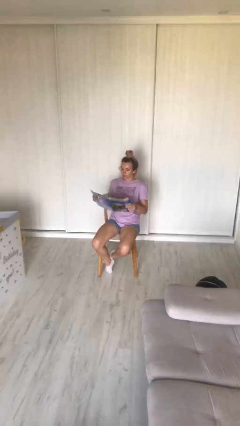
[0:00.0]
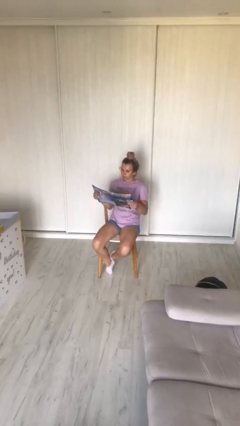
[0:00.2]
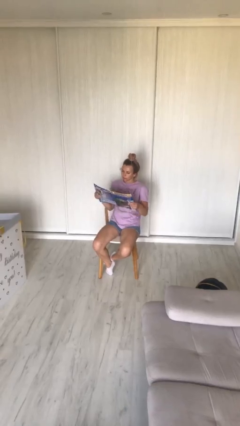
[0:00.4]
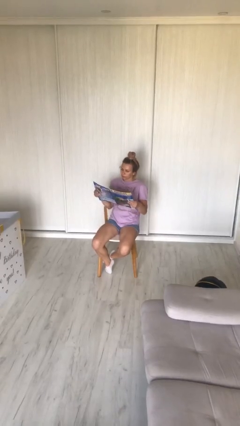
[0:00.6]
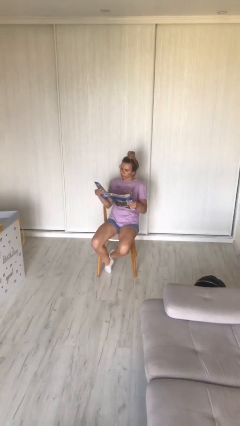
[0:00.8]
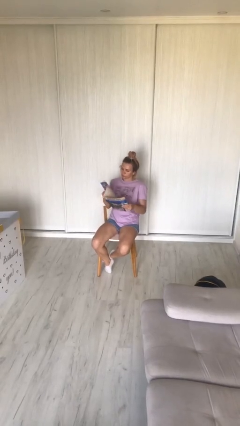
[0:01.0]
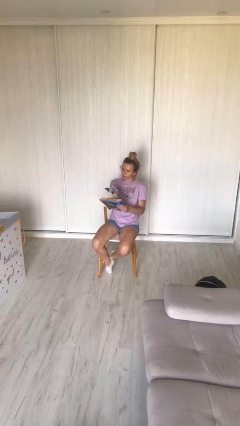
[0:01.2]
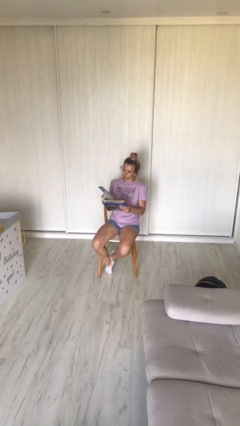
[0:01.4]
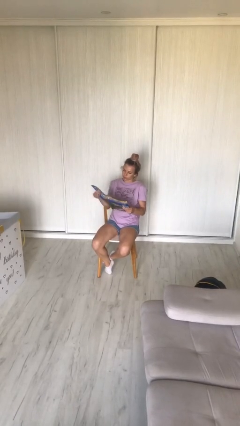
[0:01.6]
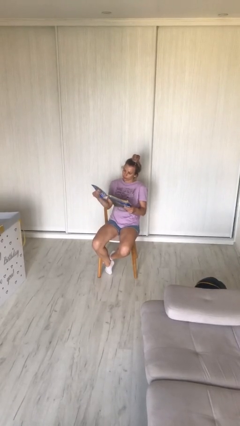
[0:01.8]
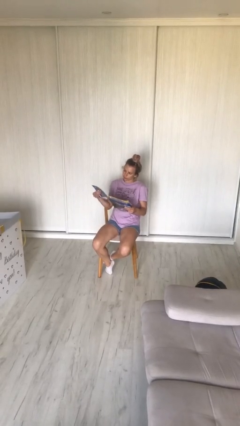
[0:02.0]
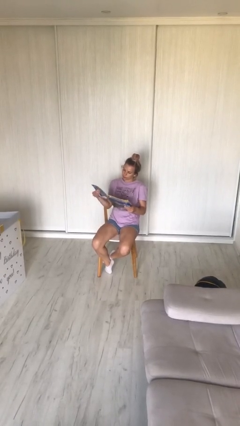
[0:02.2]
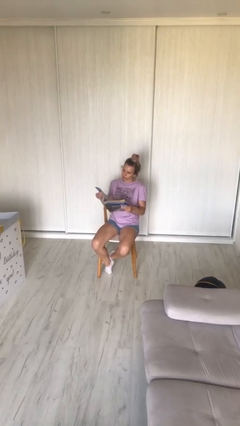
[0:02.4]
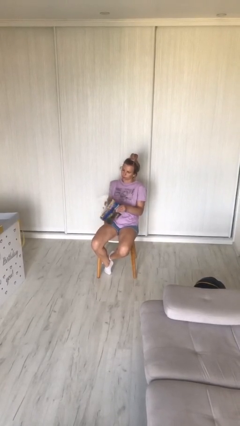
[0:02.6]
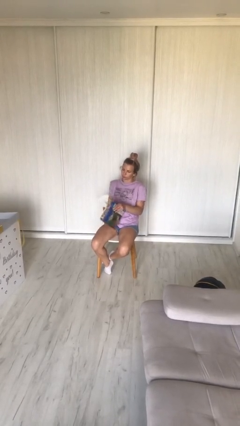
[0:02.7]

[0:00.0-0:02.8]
person reads magazine

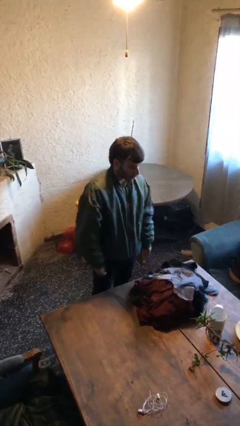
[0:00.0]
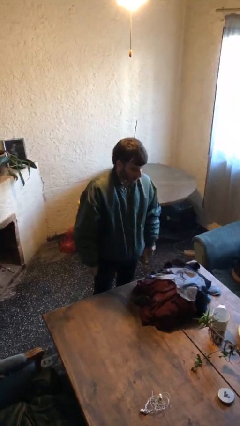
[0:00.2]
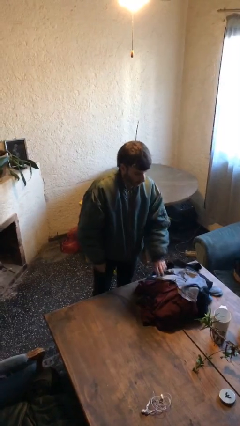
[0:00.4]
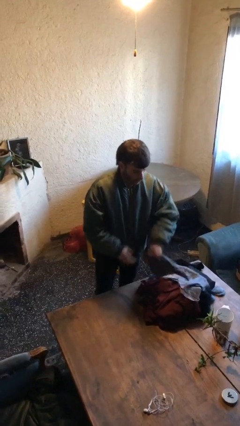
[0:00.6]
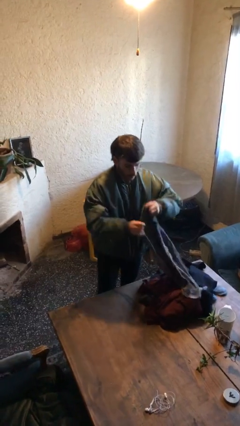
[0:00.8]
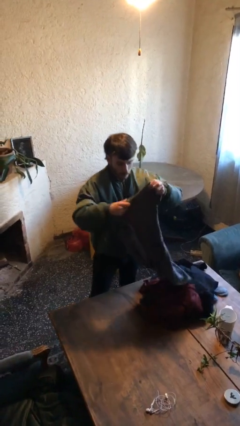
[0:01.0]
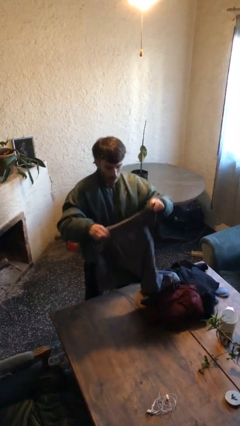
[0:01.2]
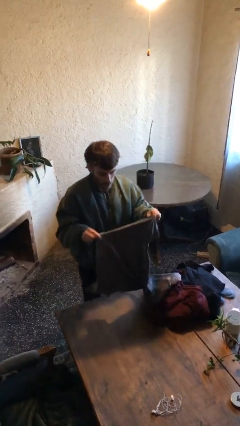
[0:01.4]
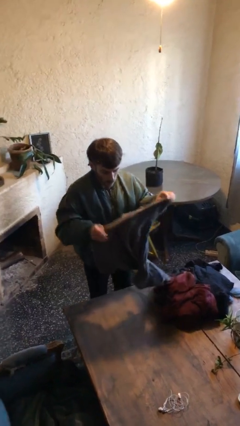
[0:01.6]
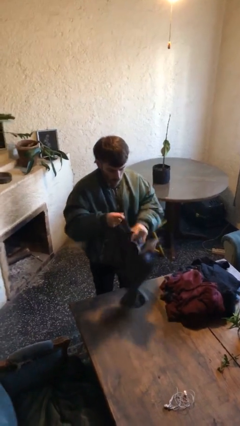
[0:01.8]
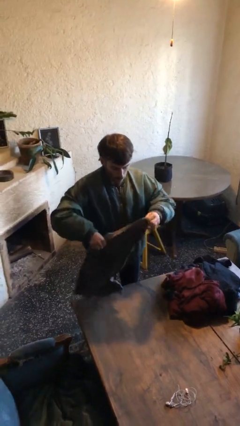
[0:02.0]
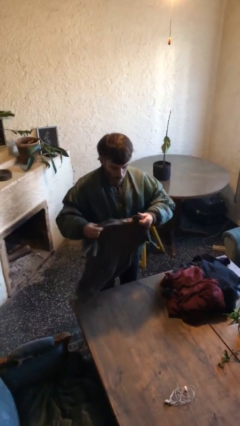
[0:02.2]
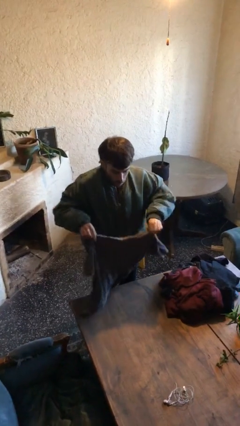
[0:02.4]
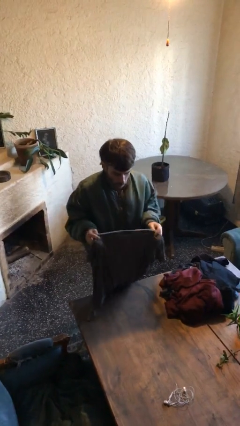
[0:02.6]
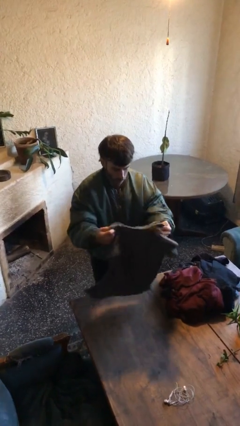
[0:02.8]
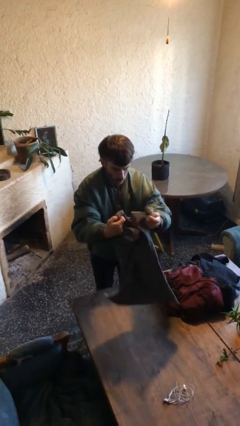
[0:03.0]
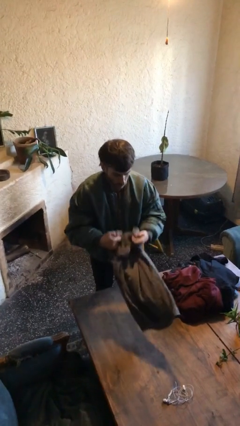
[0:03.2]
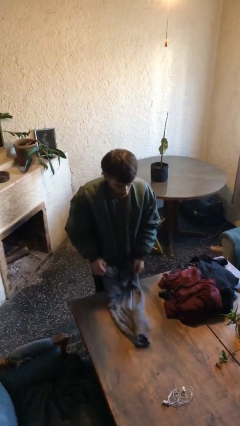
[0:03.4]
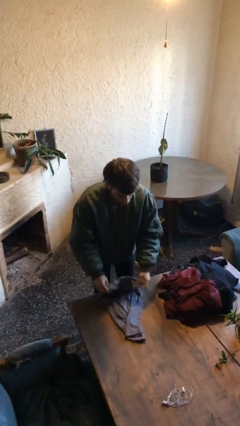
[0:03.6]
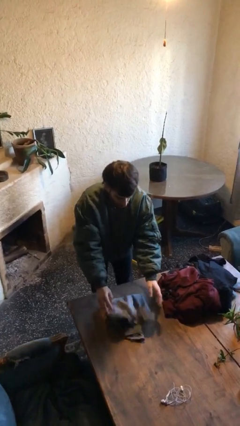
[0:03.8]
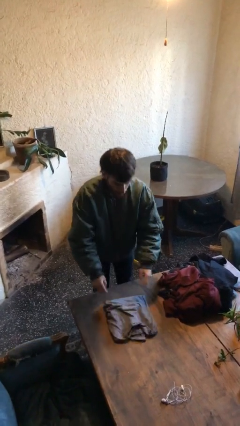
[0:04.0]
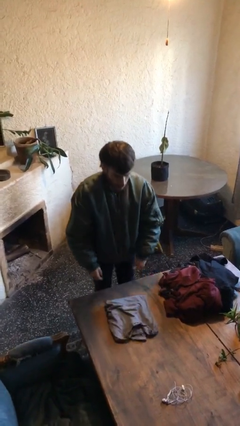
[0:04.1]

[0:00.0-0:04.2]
person folds shirt

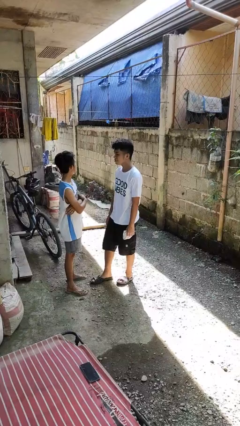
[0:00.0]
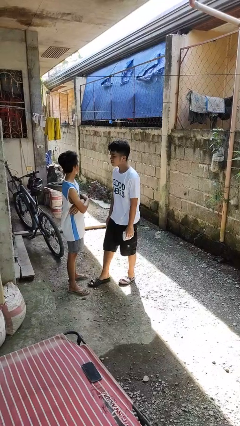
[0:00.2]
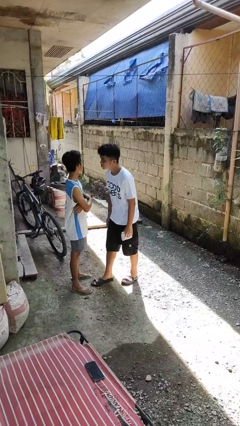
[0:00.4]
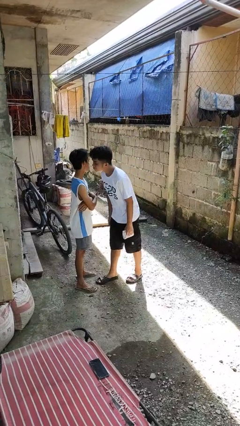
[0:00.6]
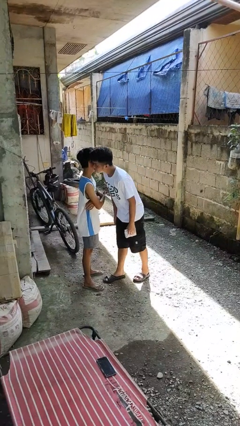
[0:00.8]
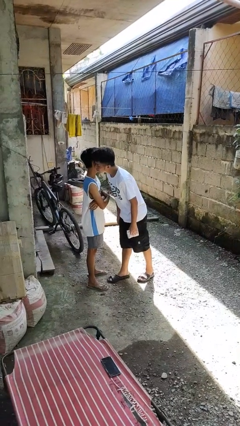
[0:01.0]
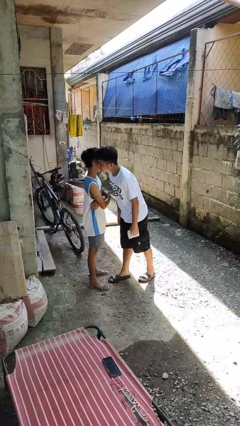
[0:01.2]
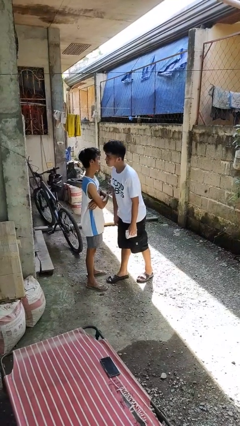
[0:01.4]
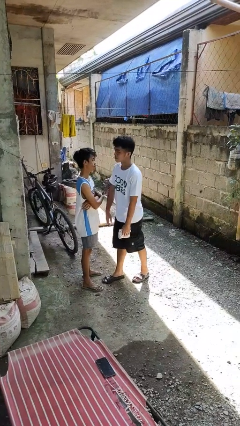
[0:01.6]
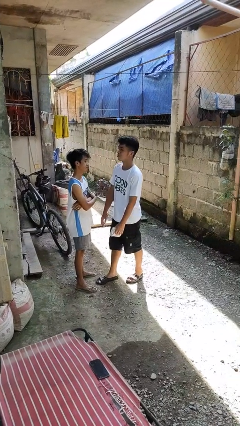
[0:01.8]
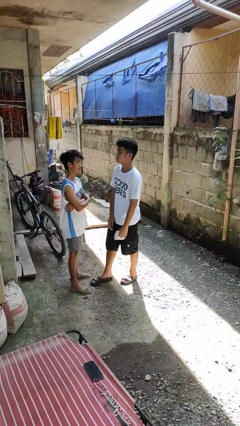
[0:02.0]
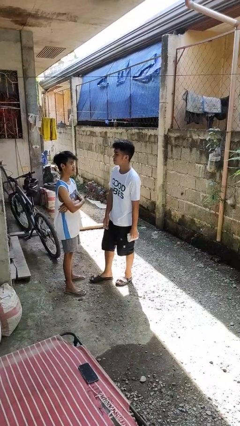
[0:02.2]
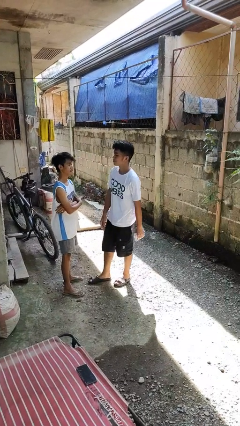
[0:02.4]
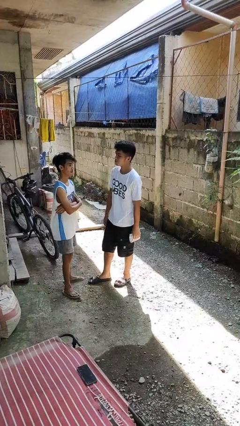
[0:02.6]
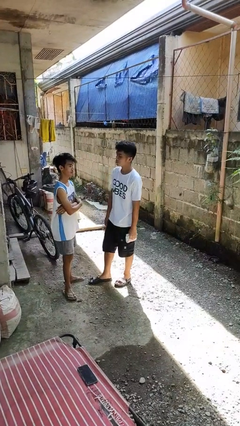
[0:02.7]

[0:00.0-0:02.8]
person kisses cheek of person

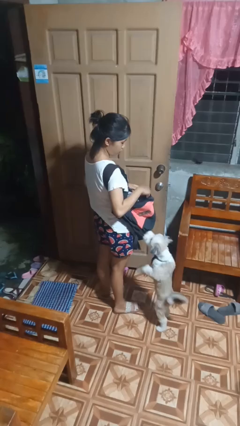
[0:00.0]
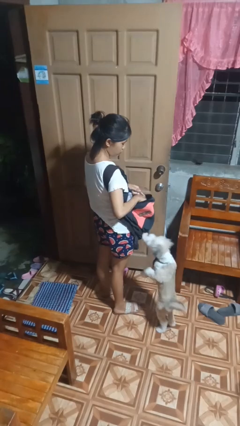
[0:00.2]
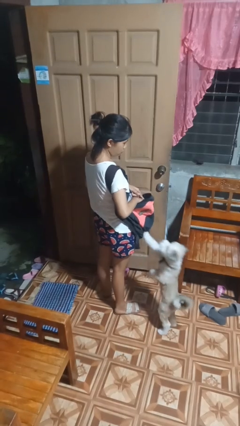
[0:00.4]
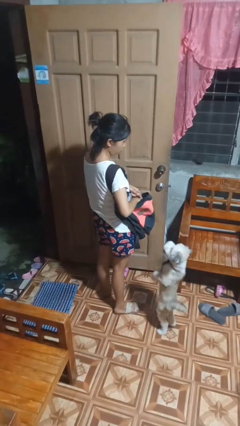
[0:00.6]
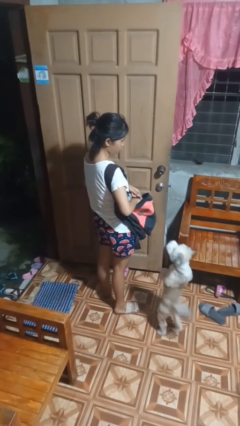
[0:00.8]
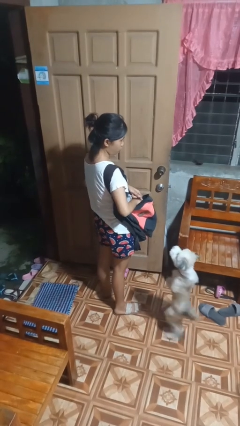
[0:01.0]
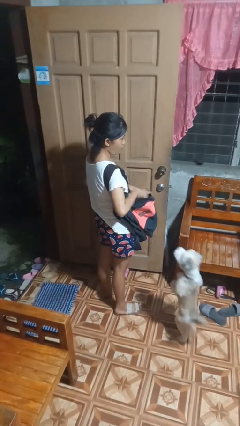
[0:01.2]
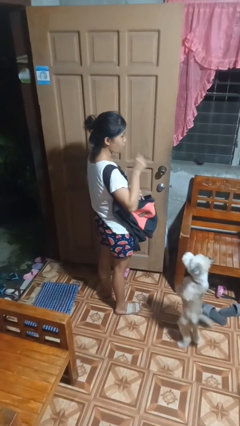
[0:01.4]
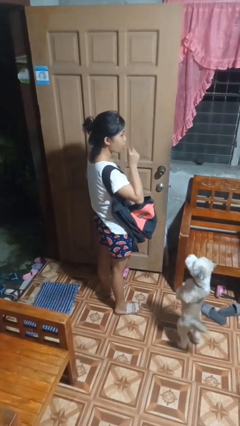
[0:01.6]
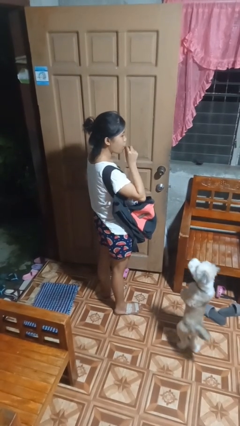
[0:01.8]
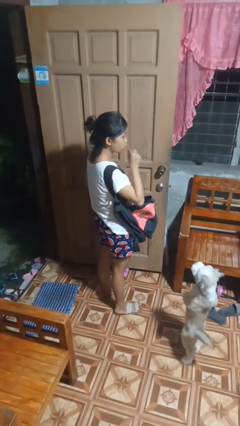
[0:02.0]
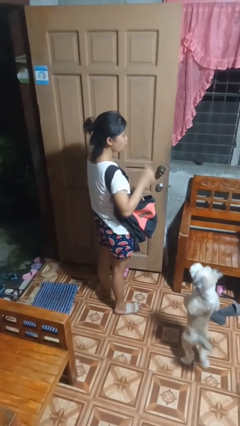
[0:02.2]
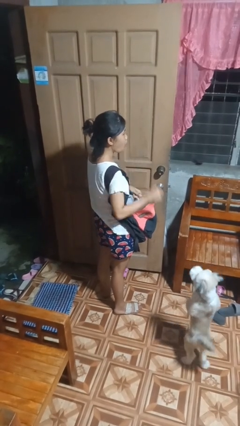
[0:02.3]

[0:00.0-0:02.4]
person eats snack from bag

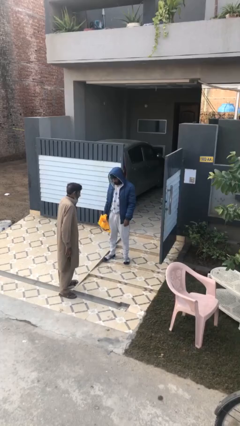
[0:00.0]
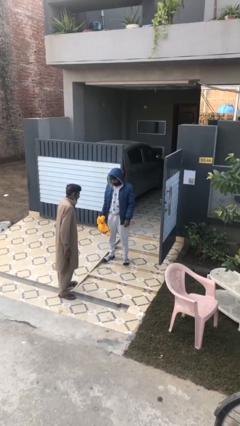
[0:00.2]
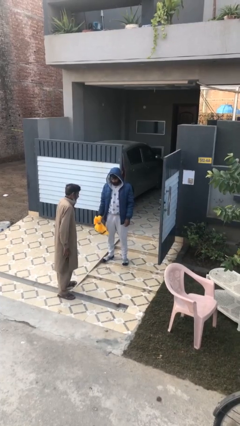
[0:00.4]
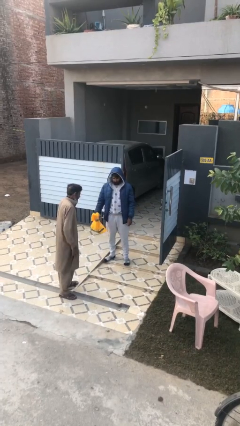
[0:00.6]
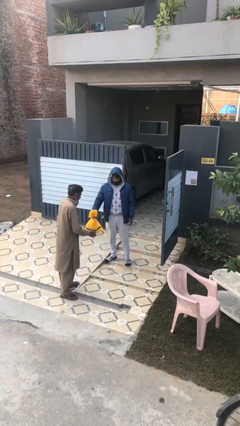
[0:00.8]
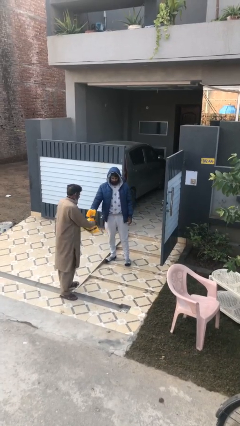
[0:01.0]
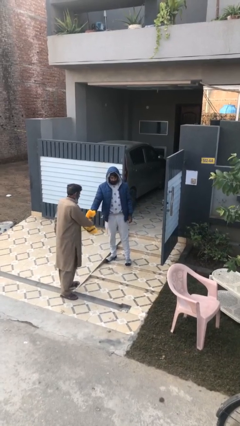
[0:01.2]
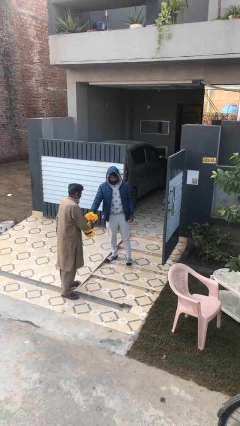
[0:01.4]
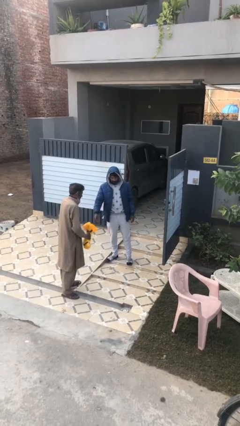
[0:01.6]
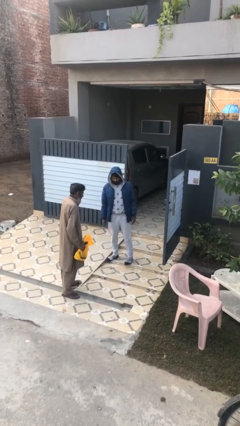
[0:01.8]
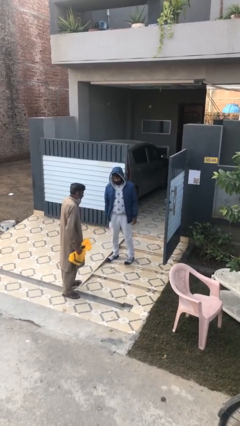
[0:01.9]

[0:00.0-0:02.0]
person transfers object to person

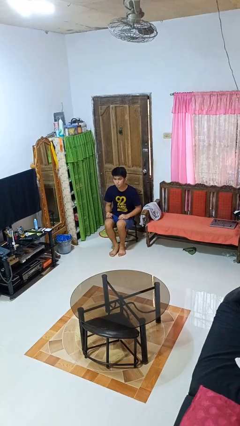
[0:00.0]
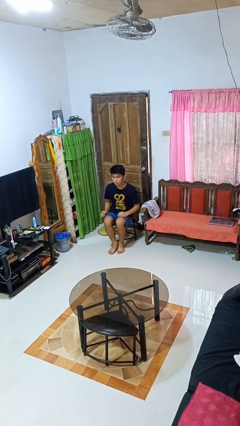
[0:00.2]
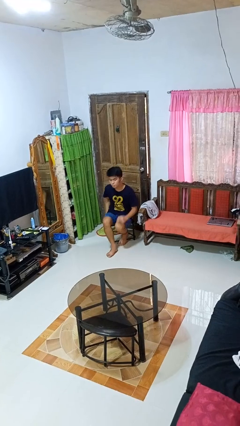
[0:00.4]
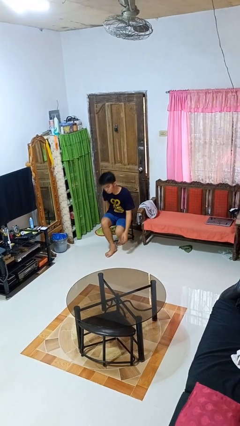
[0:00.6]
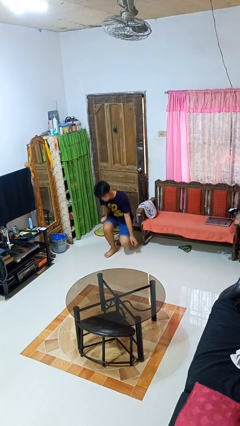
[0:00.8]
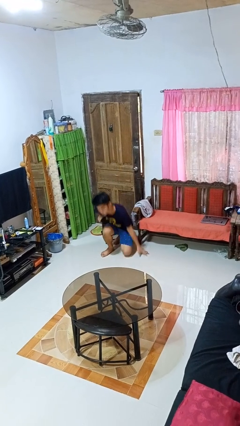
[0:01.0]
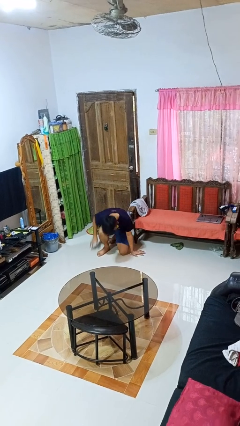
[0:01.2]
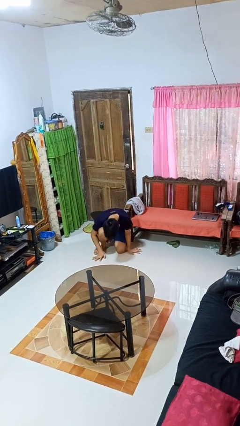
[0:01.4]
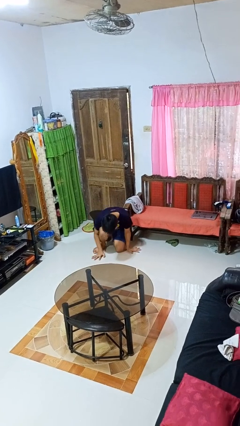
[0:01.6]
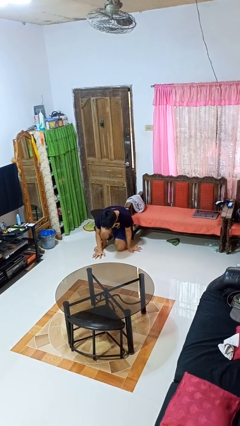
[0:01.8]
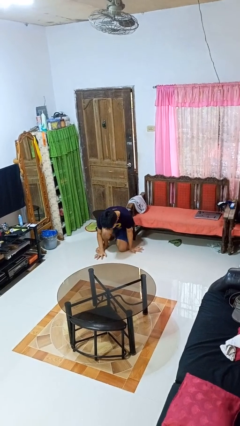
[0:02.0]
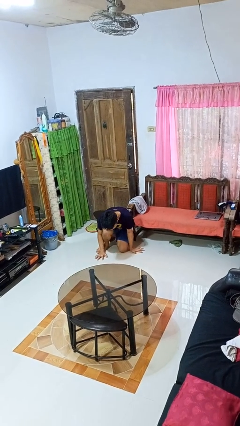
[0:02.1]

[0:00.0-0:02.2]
person falls from chair

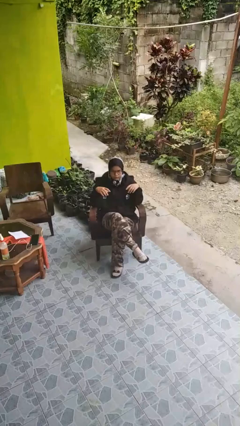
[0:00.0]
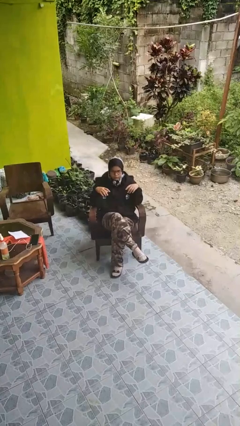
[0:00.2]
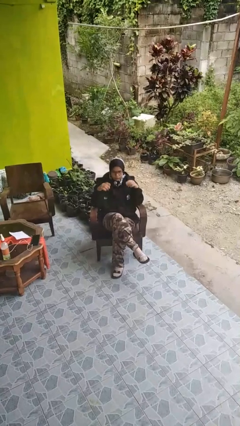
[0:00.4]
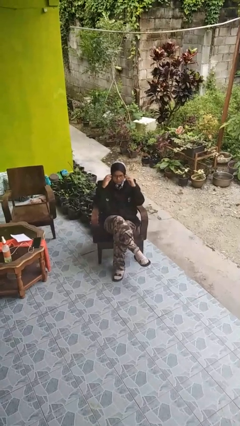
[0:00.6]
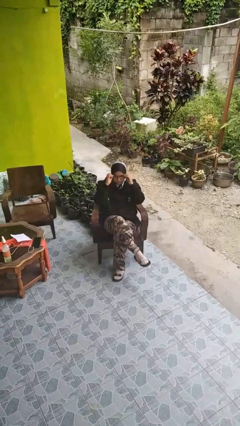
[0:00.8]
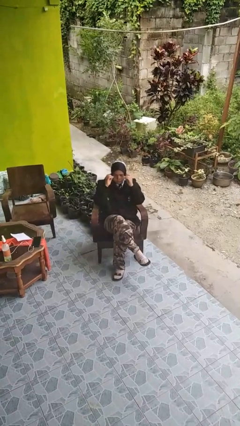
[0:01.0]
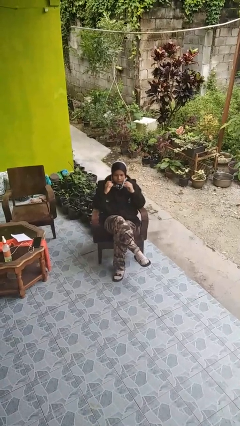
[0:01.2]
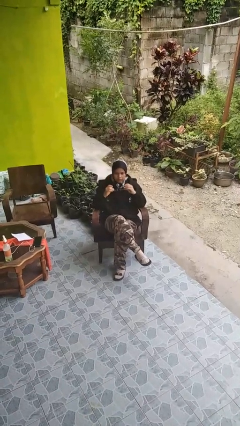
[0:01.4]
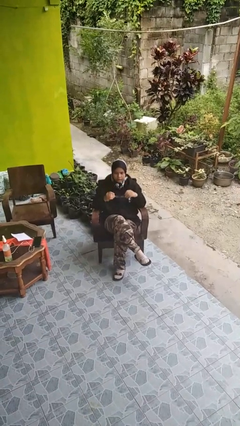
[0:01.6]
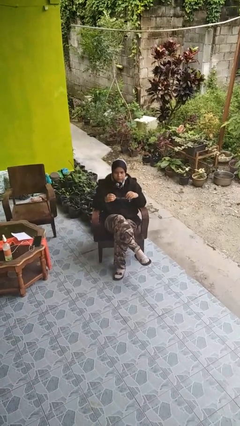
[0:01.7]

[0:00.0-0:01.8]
person takes off glasses
